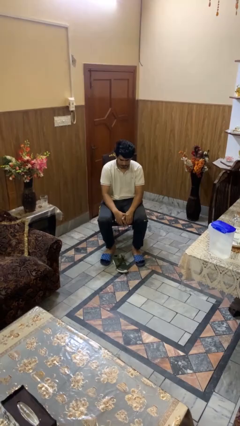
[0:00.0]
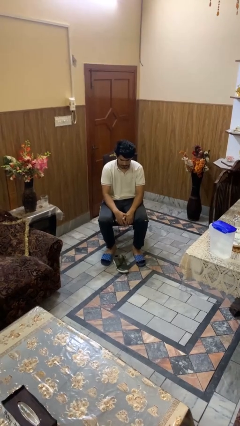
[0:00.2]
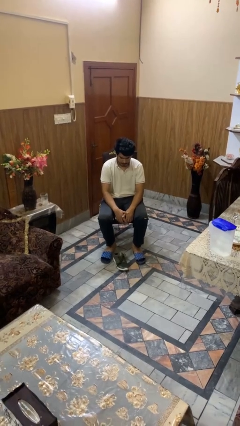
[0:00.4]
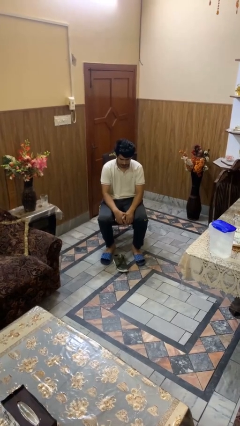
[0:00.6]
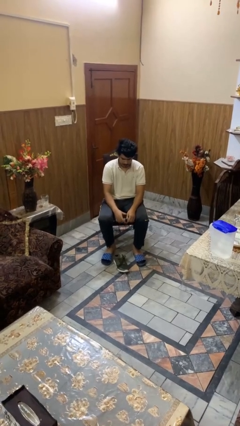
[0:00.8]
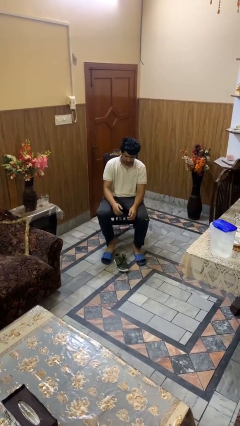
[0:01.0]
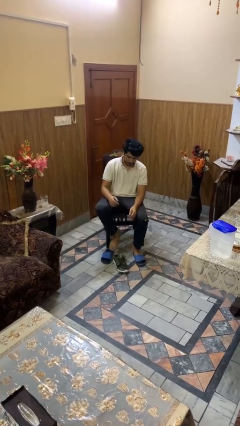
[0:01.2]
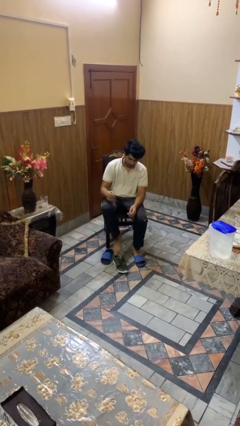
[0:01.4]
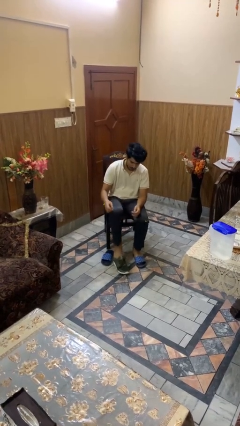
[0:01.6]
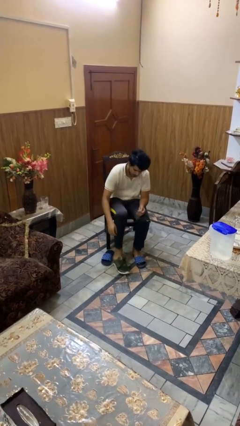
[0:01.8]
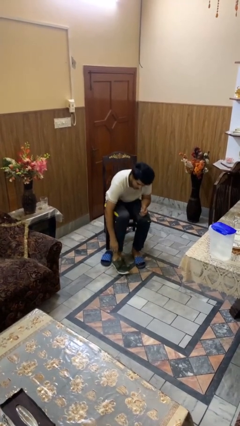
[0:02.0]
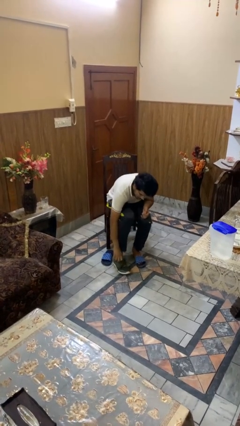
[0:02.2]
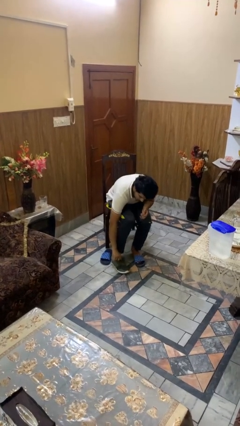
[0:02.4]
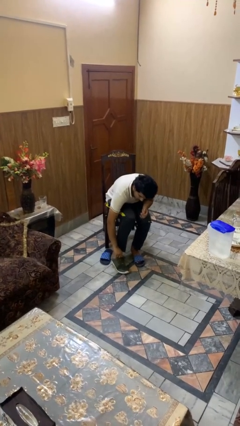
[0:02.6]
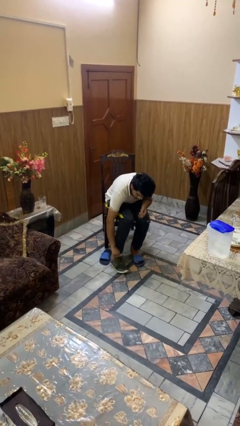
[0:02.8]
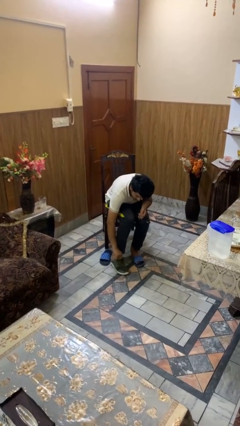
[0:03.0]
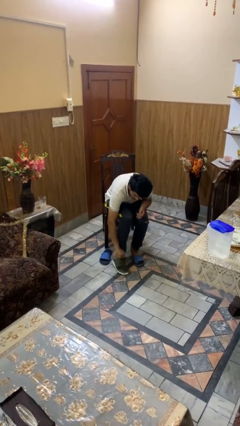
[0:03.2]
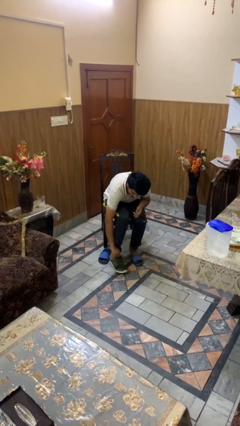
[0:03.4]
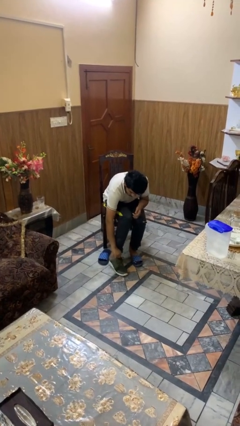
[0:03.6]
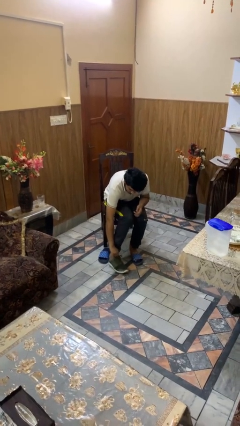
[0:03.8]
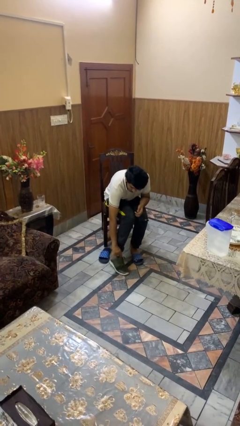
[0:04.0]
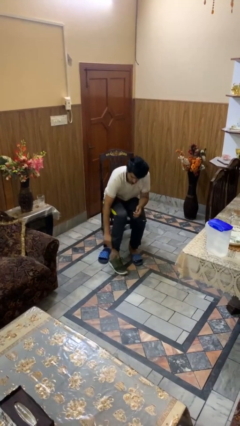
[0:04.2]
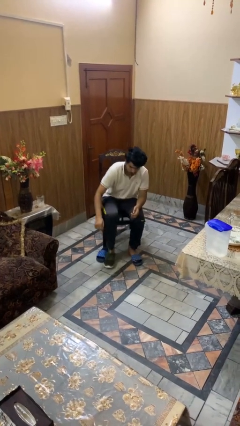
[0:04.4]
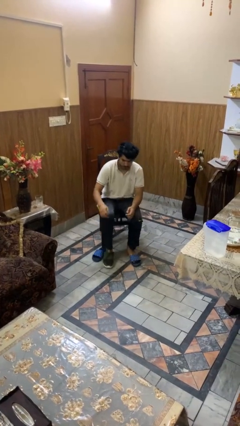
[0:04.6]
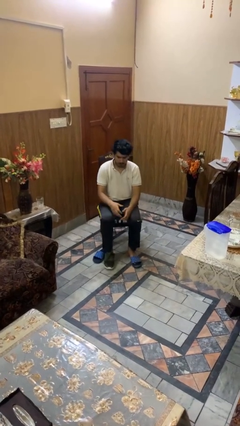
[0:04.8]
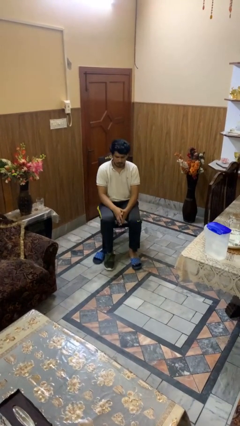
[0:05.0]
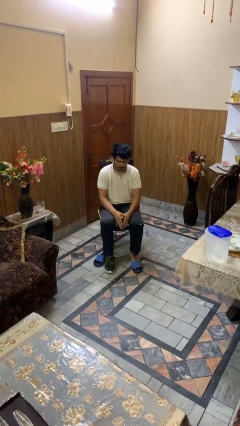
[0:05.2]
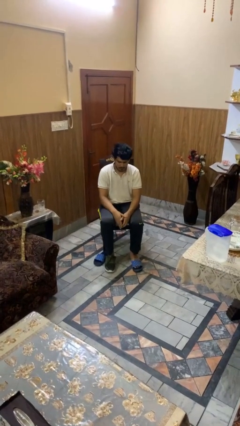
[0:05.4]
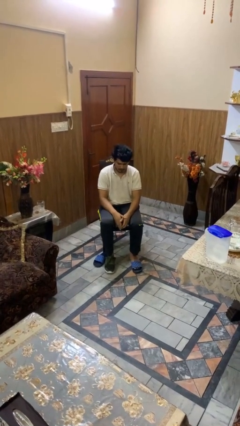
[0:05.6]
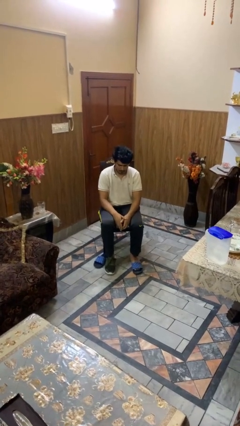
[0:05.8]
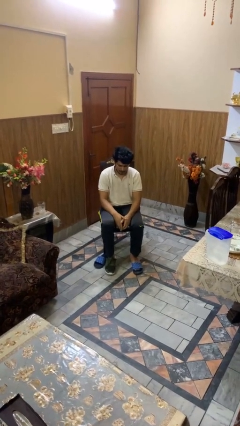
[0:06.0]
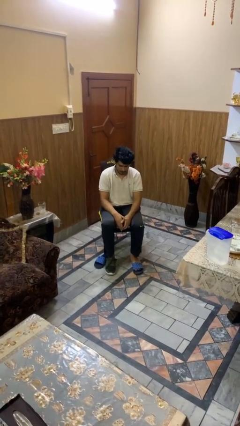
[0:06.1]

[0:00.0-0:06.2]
person puts on boots

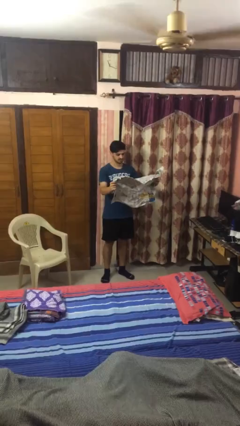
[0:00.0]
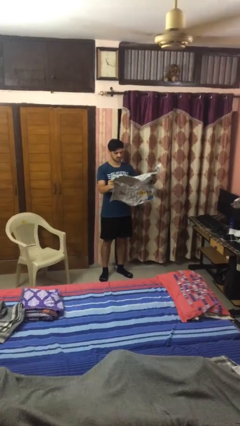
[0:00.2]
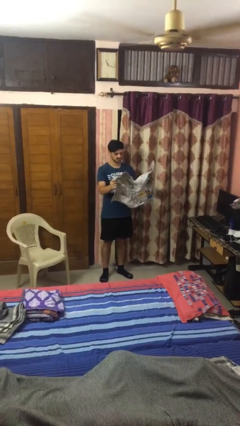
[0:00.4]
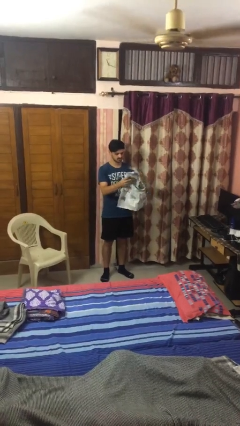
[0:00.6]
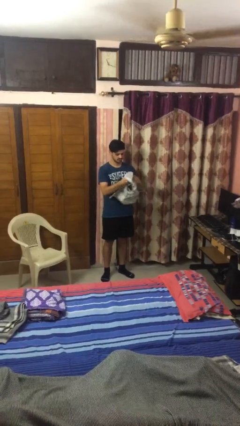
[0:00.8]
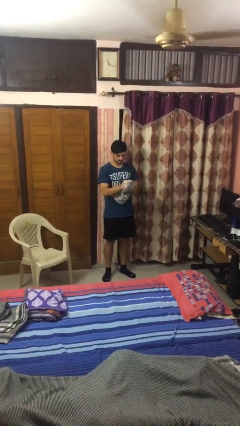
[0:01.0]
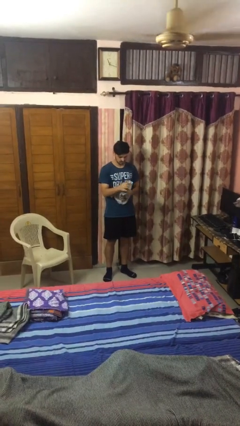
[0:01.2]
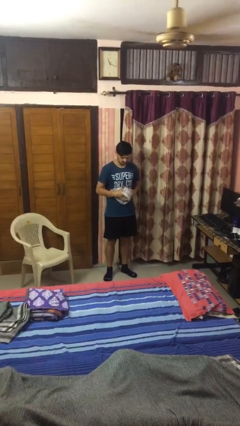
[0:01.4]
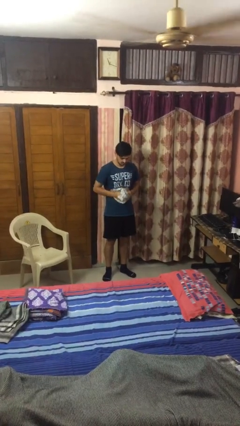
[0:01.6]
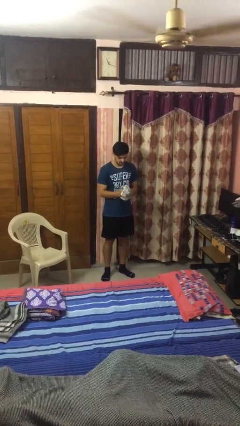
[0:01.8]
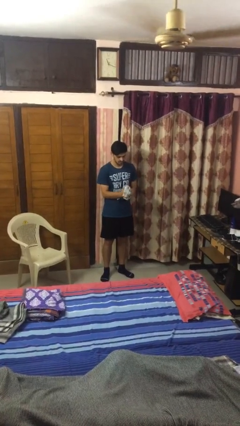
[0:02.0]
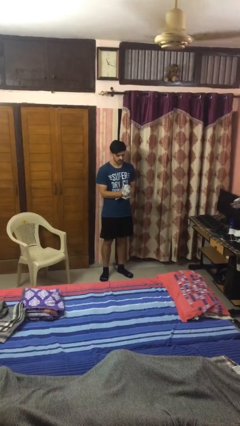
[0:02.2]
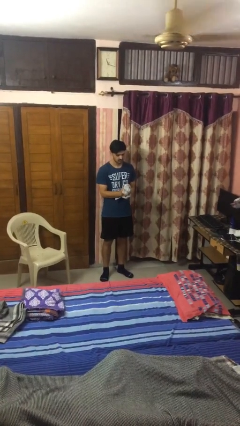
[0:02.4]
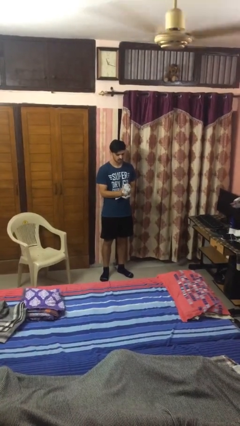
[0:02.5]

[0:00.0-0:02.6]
person crumples paper

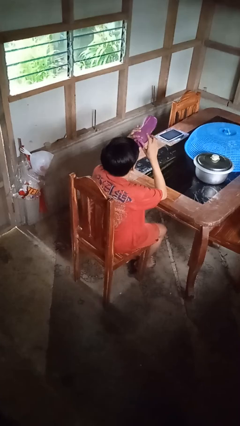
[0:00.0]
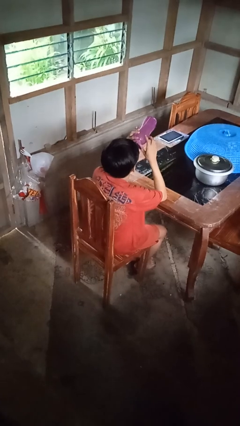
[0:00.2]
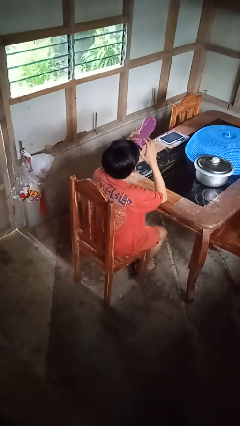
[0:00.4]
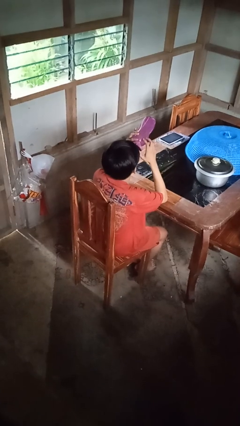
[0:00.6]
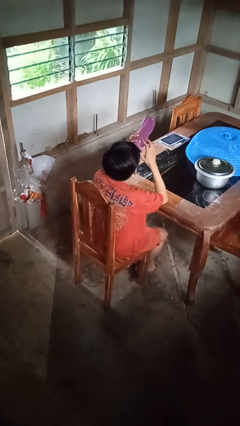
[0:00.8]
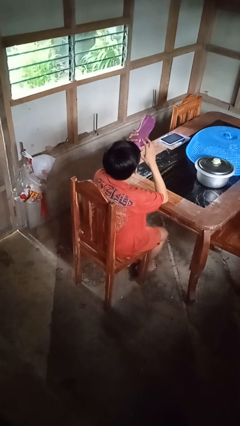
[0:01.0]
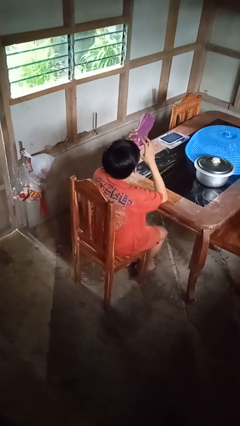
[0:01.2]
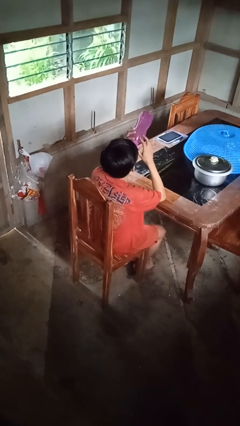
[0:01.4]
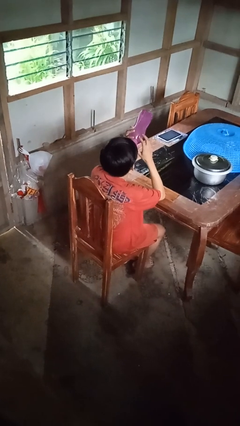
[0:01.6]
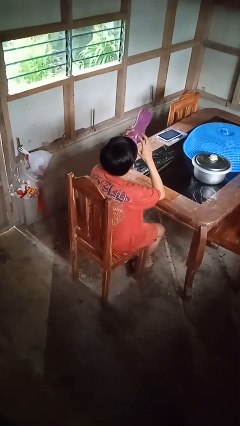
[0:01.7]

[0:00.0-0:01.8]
person drinks from bottle

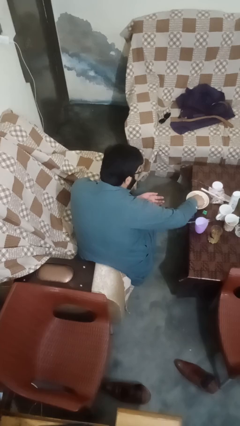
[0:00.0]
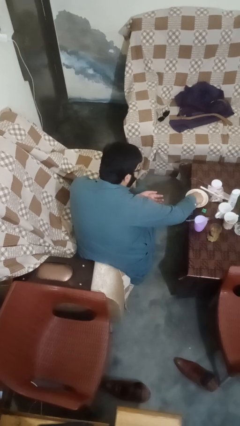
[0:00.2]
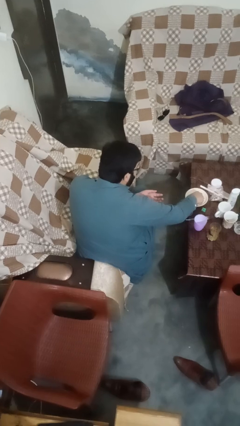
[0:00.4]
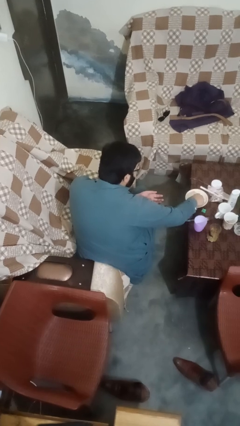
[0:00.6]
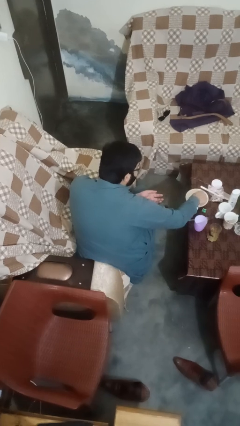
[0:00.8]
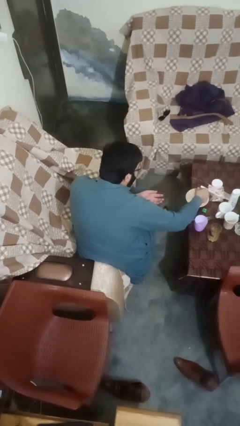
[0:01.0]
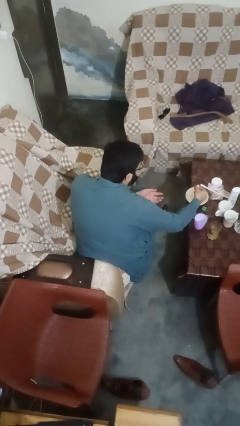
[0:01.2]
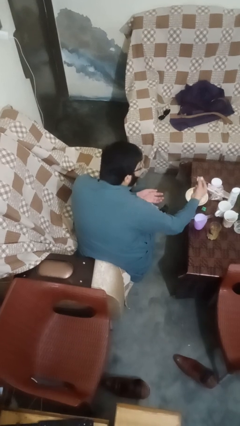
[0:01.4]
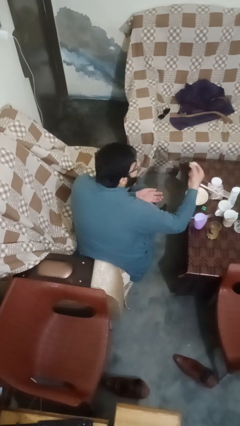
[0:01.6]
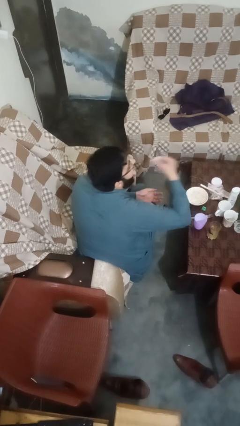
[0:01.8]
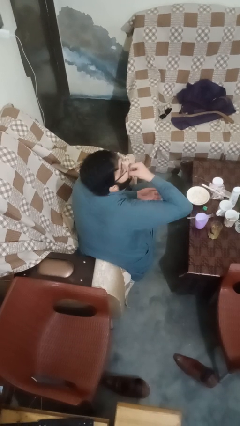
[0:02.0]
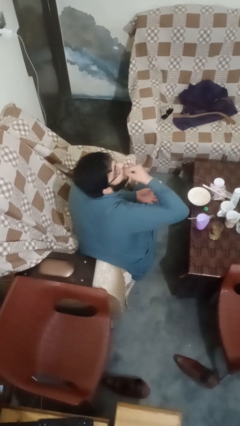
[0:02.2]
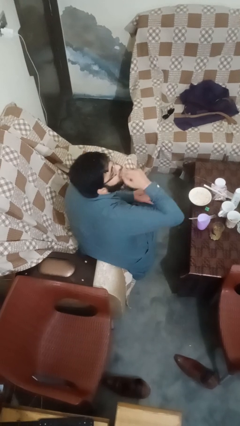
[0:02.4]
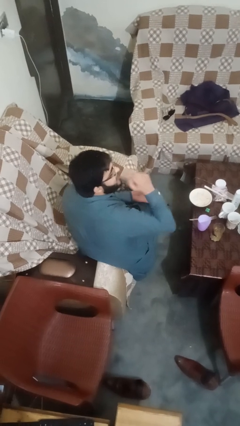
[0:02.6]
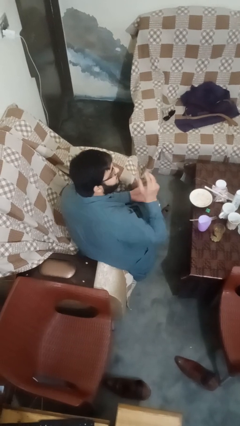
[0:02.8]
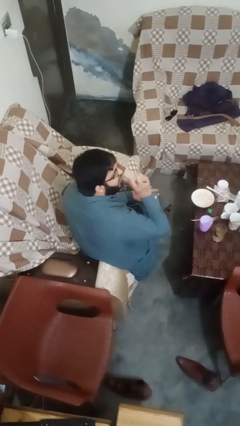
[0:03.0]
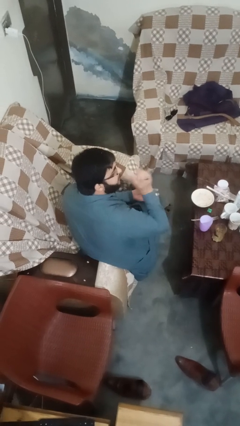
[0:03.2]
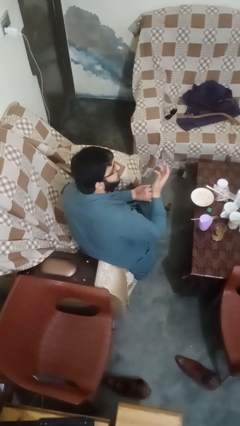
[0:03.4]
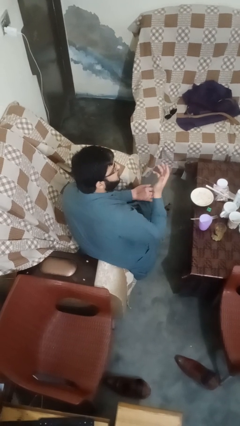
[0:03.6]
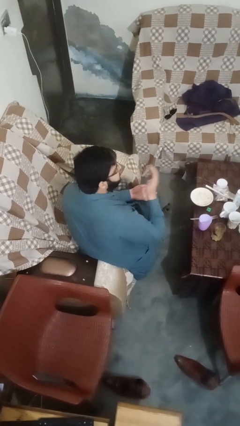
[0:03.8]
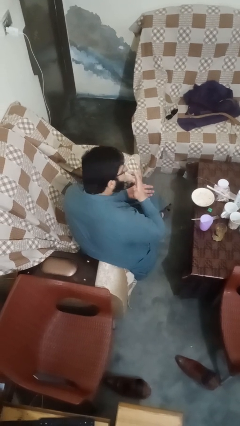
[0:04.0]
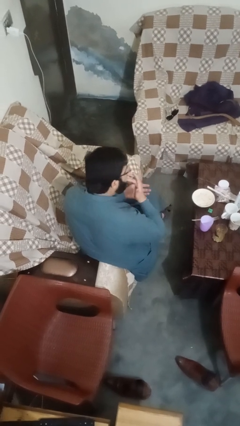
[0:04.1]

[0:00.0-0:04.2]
person eats with hands

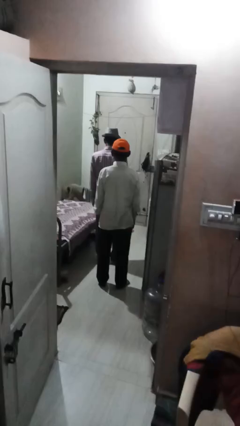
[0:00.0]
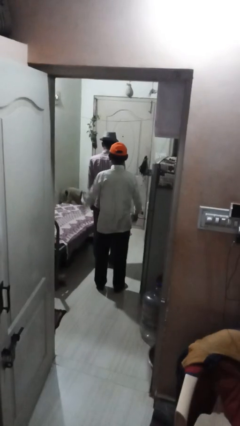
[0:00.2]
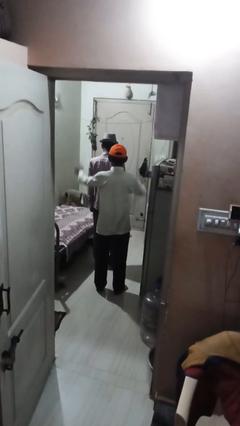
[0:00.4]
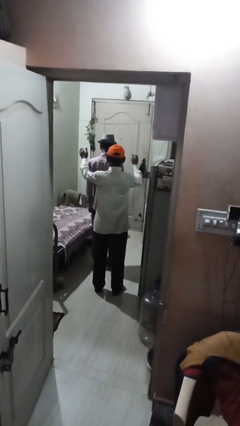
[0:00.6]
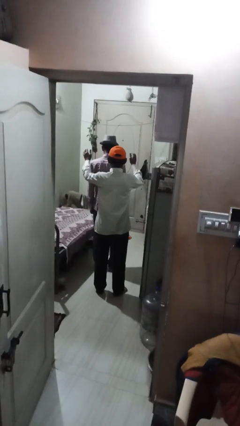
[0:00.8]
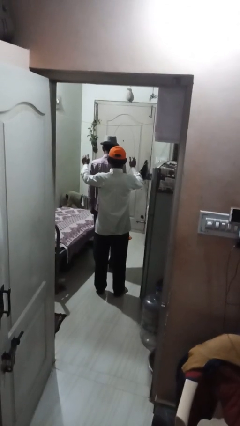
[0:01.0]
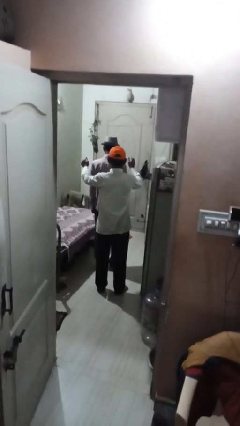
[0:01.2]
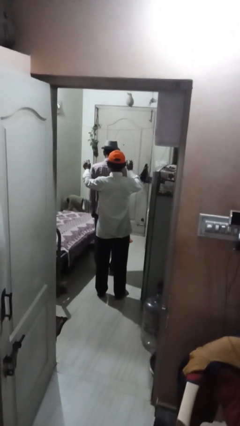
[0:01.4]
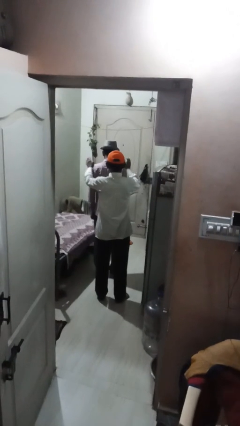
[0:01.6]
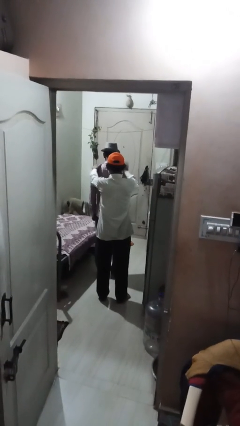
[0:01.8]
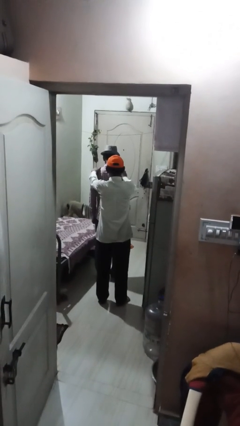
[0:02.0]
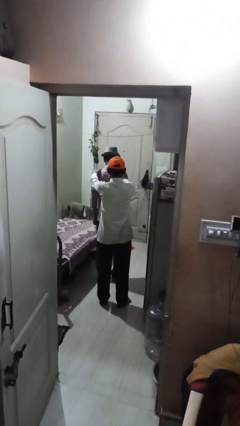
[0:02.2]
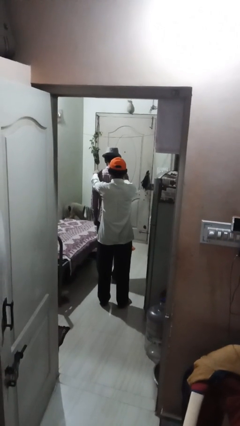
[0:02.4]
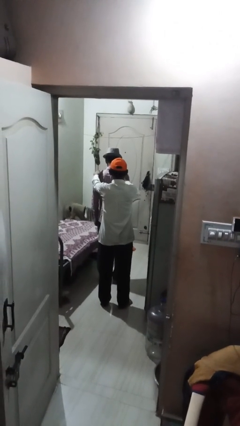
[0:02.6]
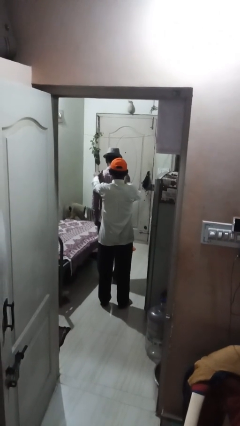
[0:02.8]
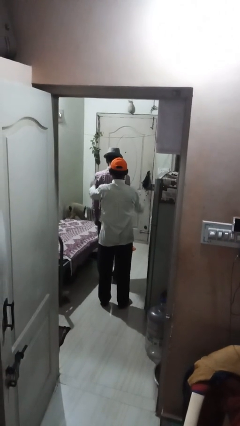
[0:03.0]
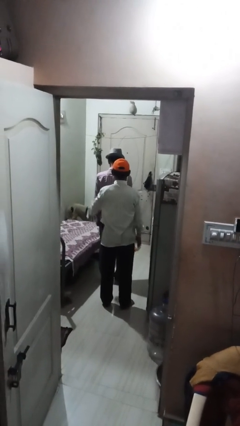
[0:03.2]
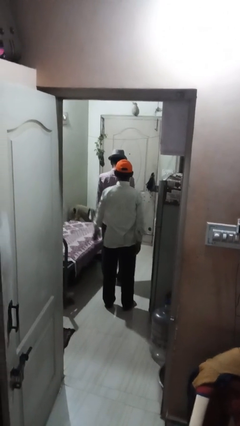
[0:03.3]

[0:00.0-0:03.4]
person touches back of person
